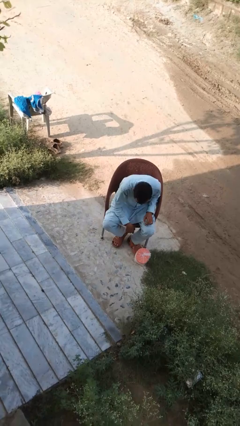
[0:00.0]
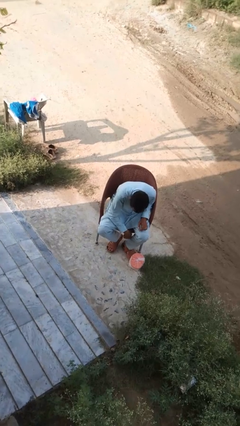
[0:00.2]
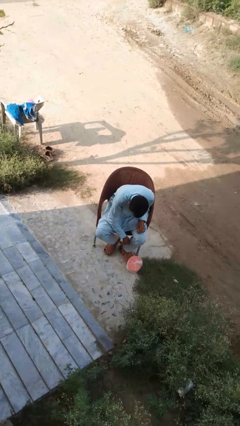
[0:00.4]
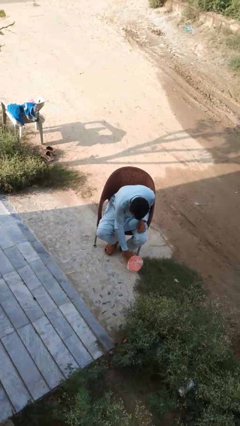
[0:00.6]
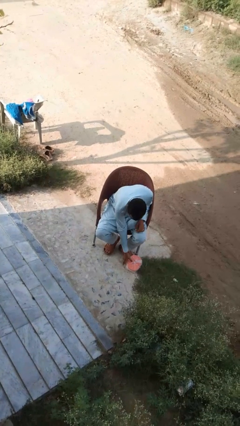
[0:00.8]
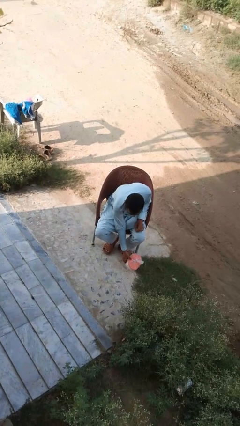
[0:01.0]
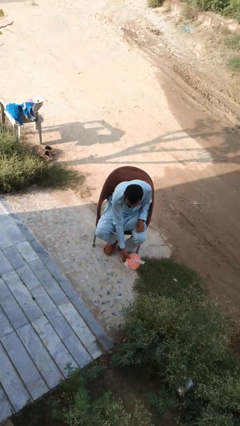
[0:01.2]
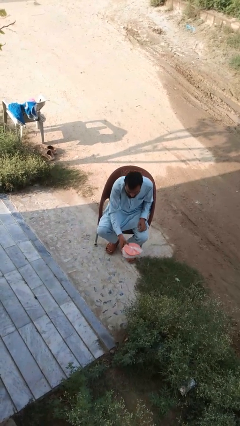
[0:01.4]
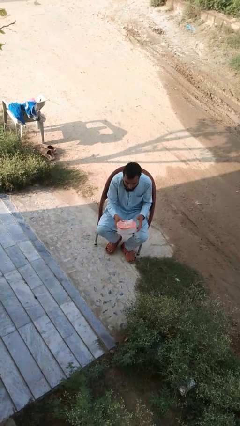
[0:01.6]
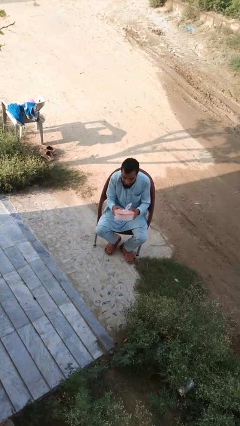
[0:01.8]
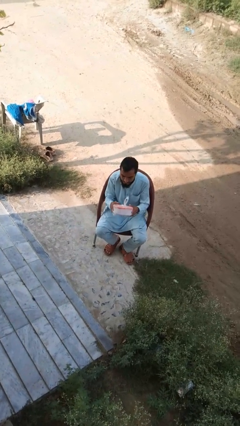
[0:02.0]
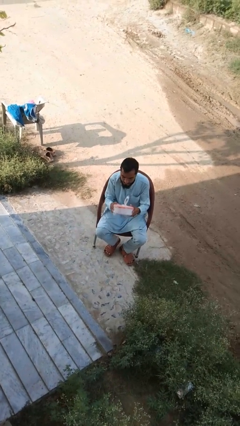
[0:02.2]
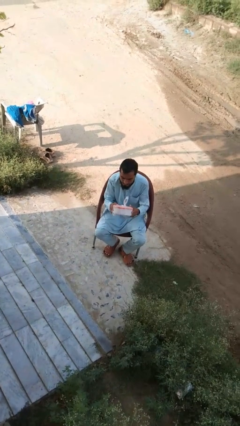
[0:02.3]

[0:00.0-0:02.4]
person picks up object from floor

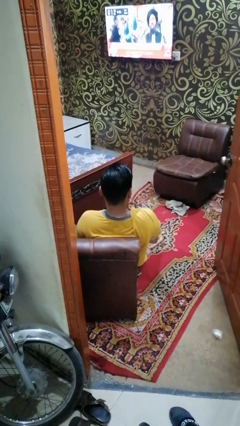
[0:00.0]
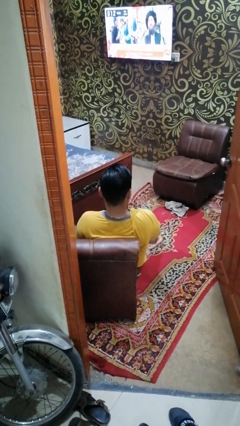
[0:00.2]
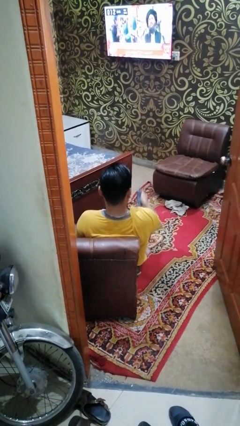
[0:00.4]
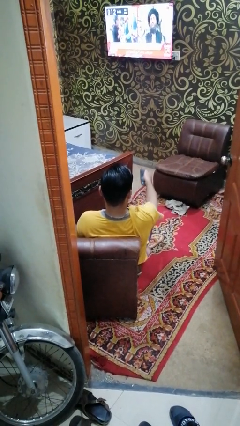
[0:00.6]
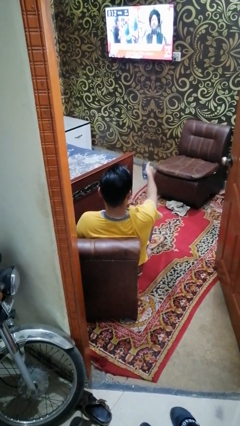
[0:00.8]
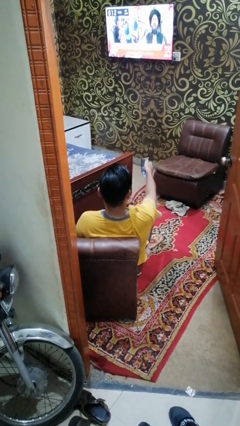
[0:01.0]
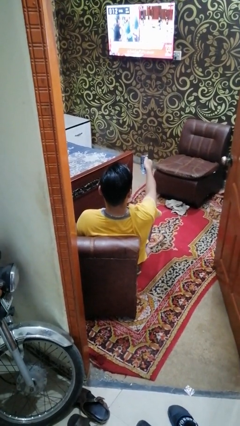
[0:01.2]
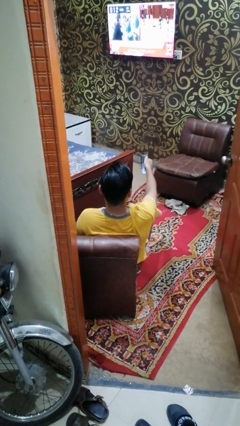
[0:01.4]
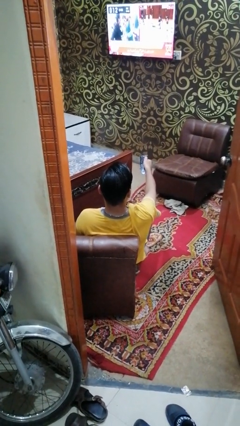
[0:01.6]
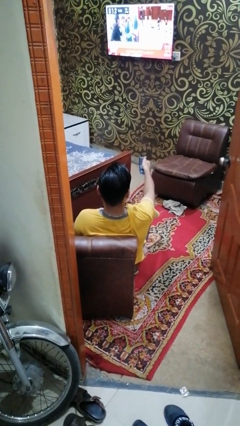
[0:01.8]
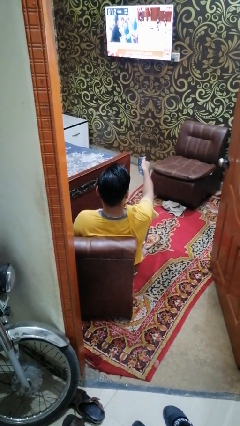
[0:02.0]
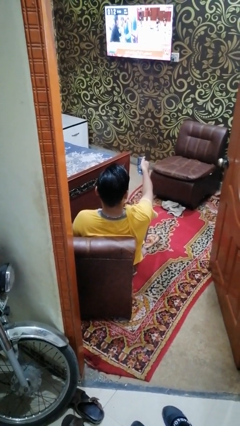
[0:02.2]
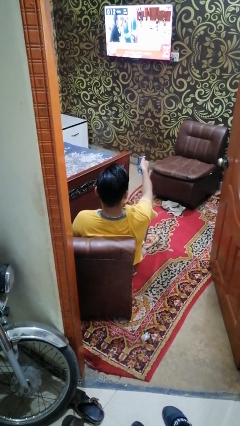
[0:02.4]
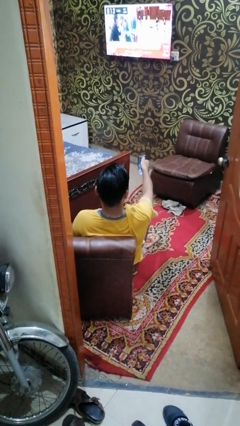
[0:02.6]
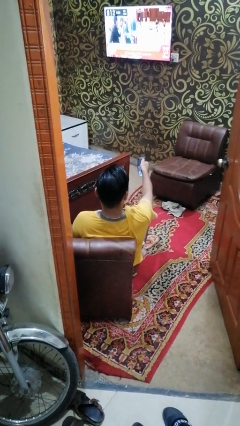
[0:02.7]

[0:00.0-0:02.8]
person uses television remote

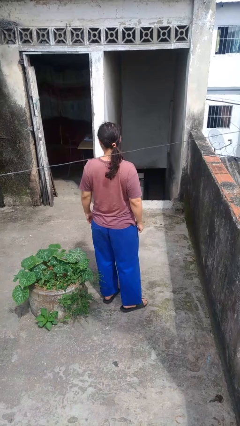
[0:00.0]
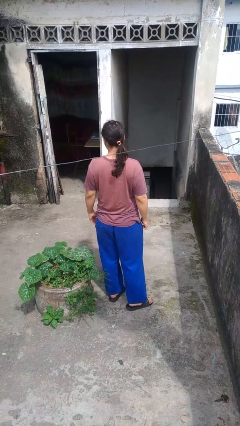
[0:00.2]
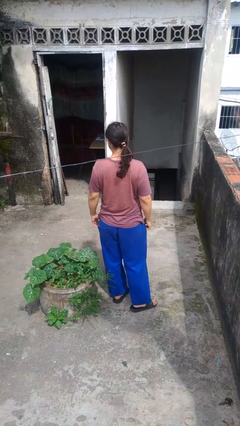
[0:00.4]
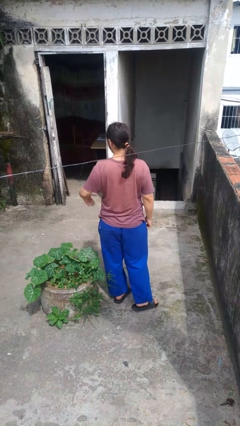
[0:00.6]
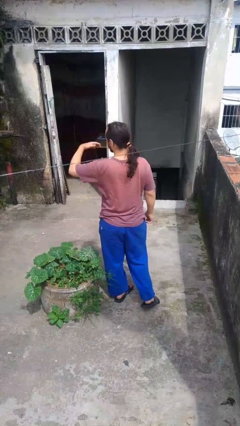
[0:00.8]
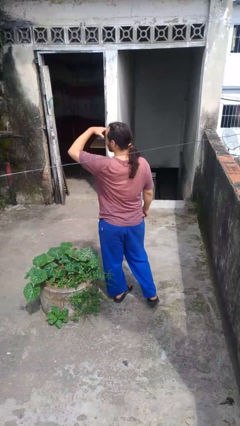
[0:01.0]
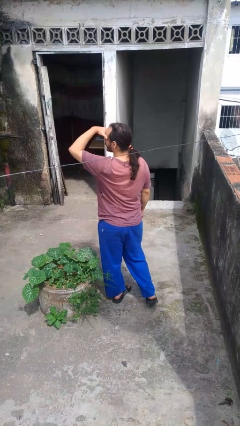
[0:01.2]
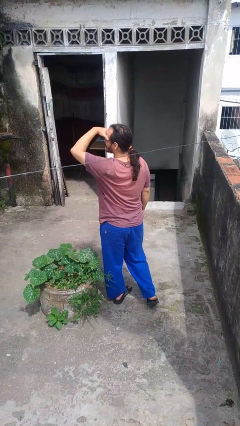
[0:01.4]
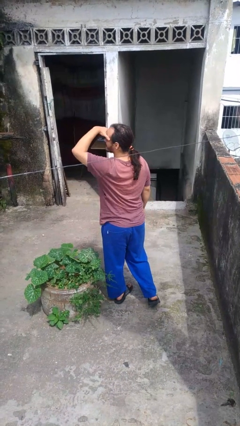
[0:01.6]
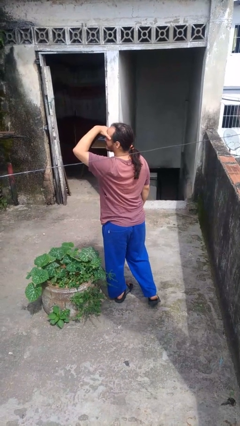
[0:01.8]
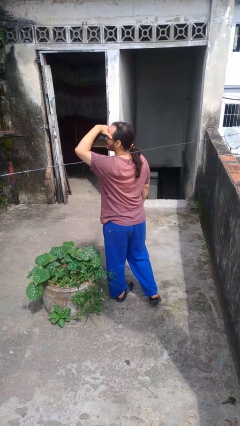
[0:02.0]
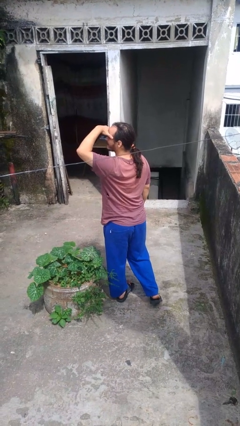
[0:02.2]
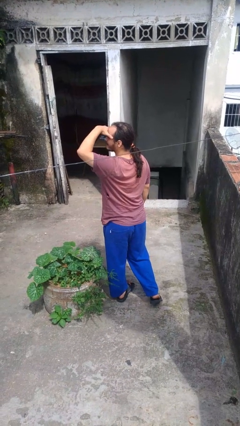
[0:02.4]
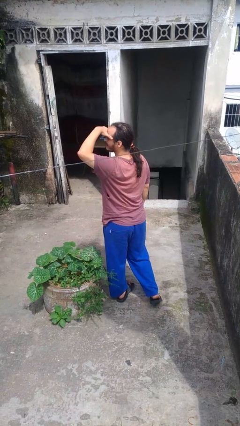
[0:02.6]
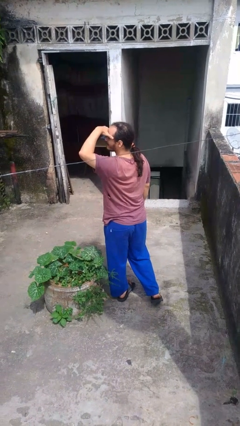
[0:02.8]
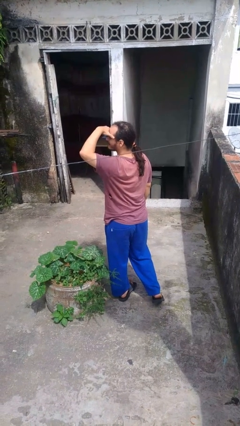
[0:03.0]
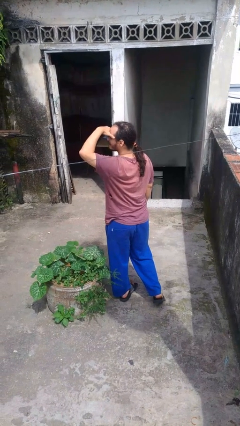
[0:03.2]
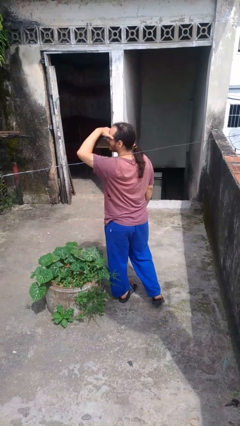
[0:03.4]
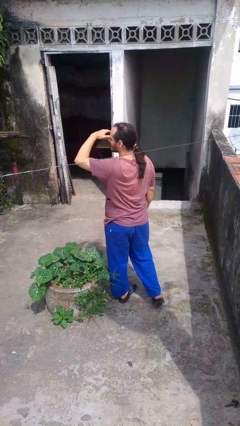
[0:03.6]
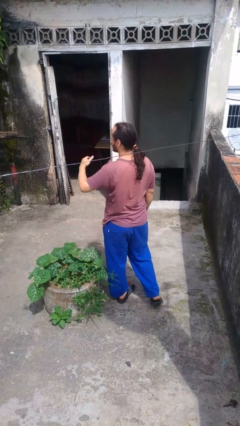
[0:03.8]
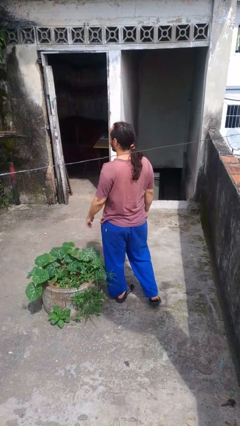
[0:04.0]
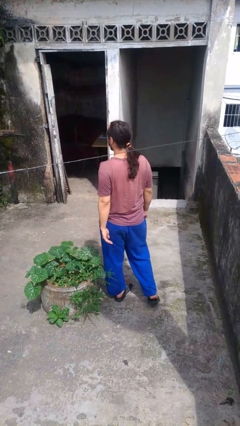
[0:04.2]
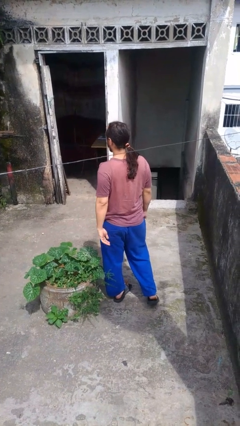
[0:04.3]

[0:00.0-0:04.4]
person shades eyes

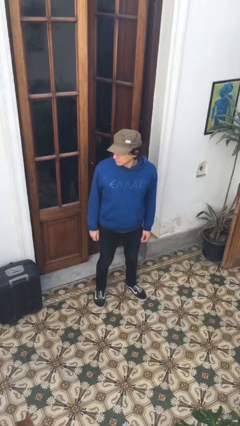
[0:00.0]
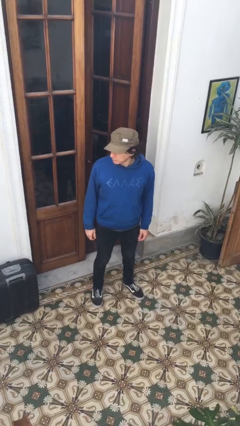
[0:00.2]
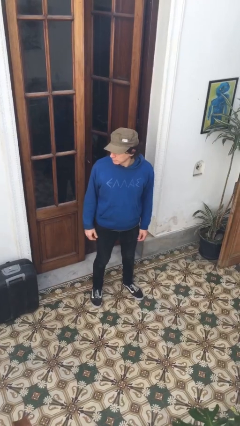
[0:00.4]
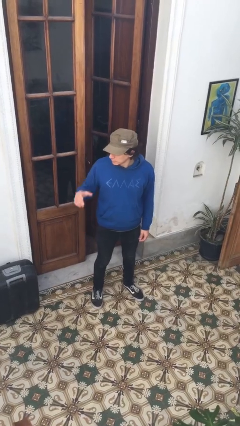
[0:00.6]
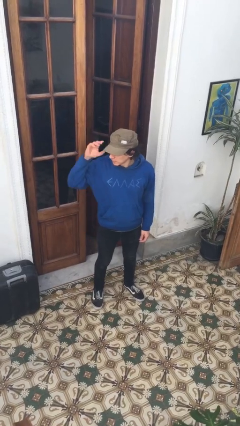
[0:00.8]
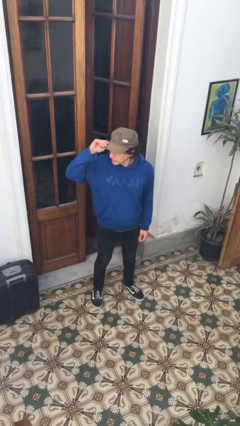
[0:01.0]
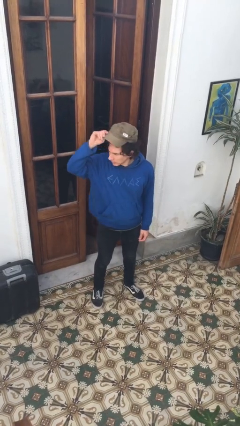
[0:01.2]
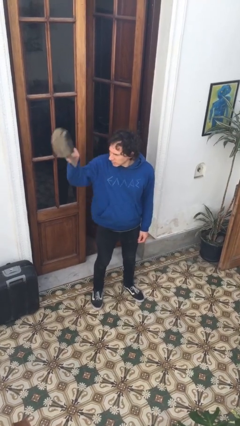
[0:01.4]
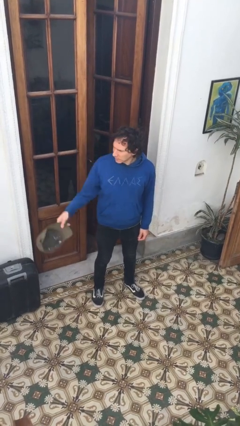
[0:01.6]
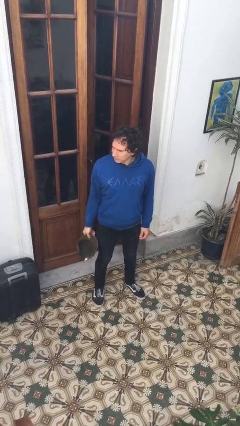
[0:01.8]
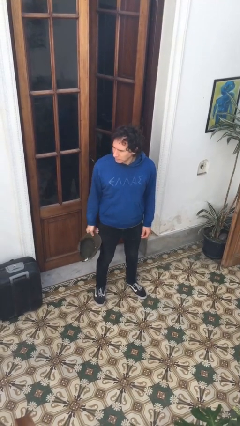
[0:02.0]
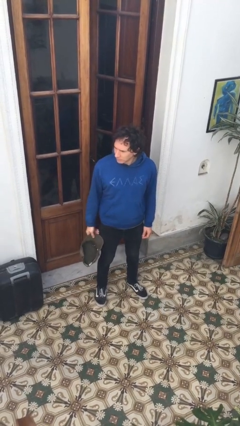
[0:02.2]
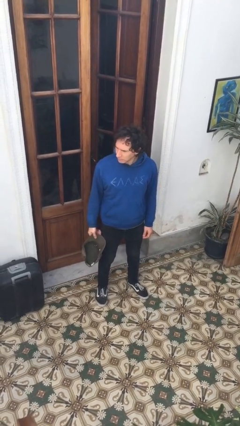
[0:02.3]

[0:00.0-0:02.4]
person takes off hat

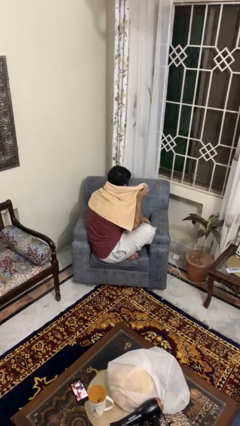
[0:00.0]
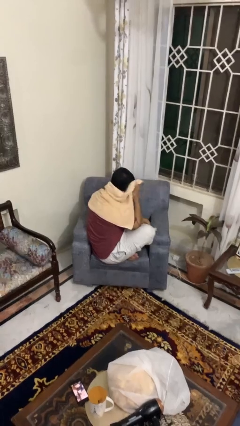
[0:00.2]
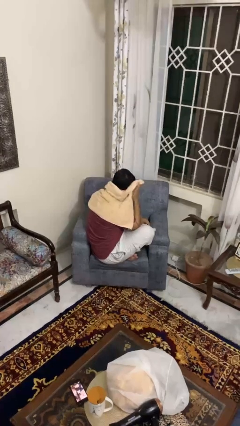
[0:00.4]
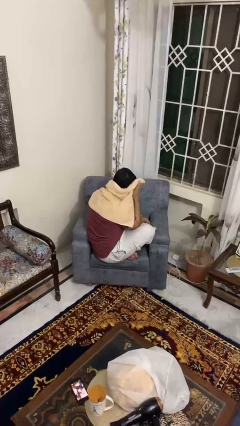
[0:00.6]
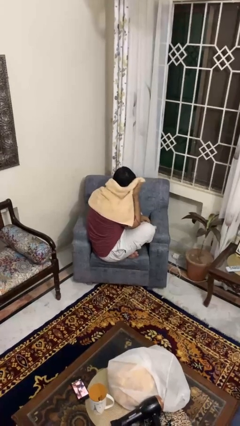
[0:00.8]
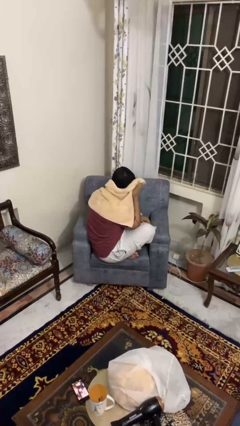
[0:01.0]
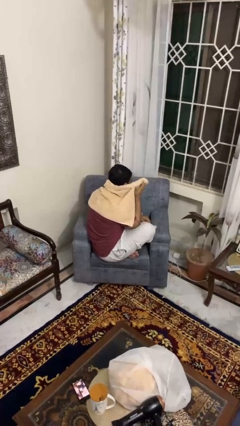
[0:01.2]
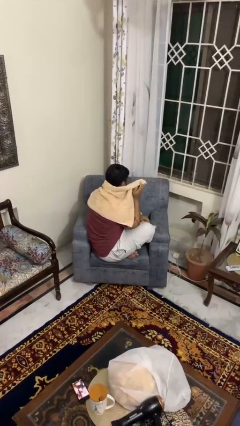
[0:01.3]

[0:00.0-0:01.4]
person dries hair with towel

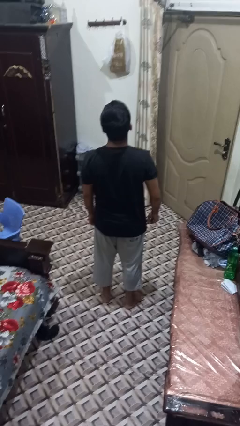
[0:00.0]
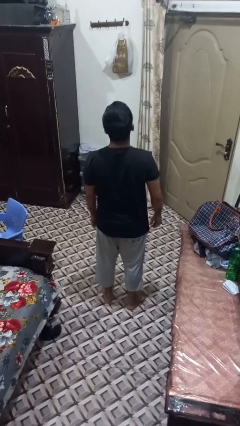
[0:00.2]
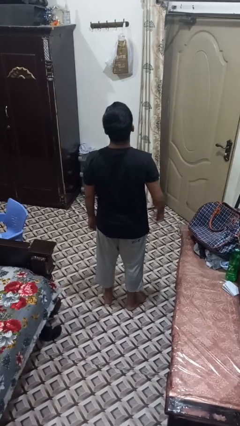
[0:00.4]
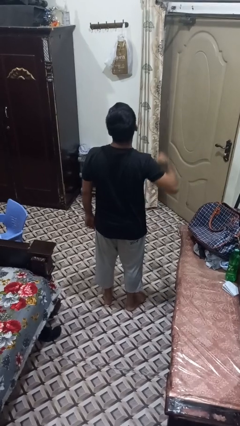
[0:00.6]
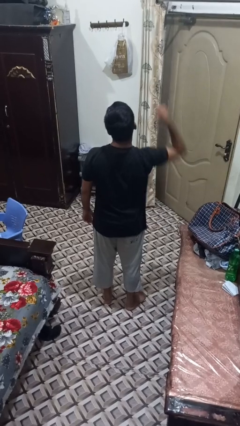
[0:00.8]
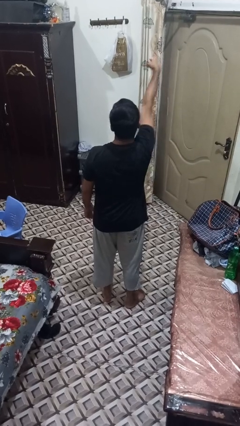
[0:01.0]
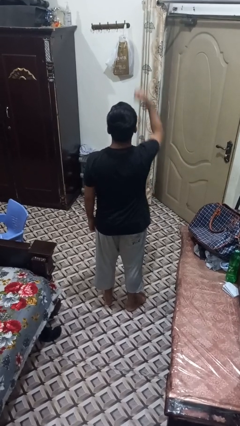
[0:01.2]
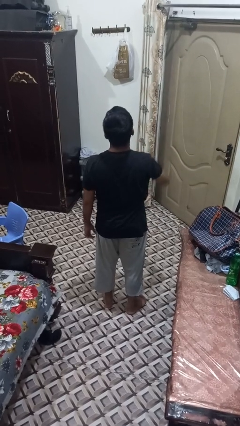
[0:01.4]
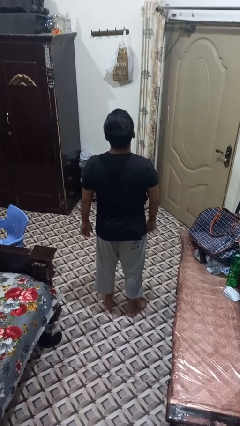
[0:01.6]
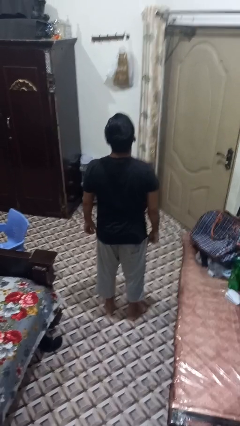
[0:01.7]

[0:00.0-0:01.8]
person punches

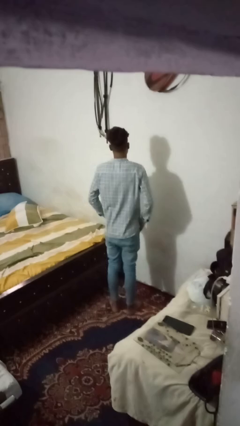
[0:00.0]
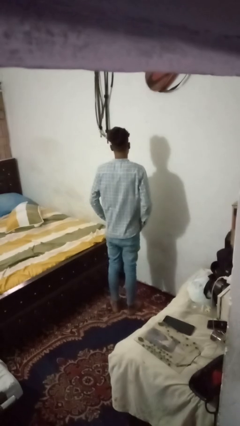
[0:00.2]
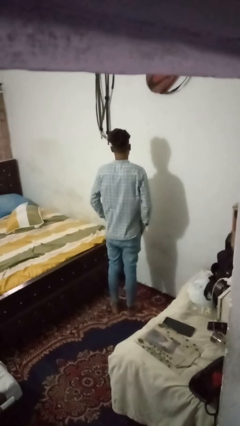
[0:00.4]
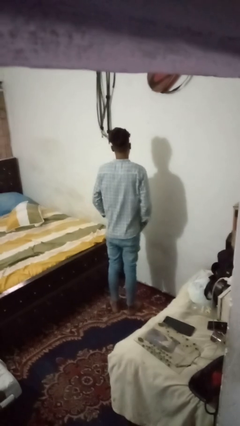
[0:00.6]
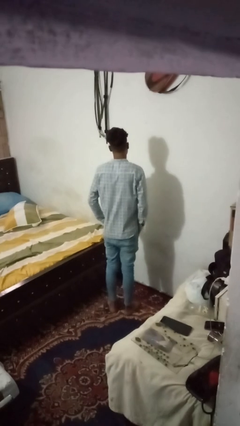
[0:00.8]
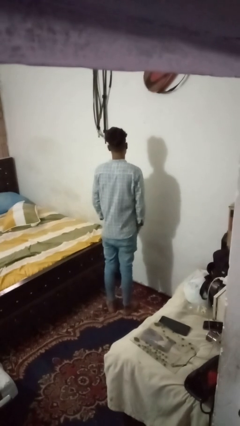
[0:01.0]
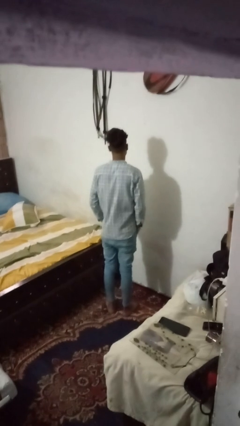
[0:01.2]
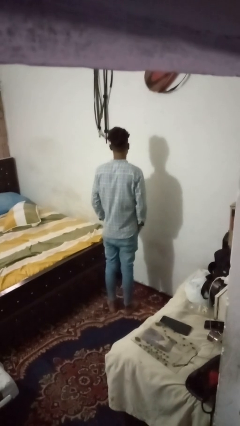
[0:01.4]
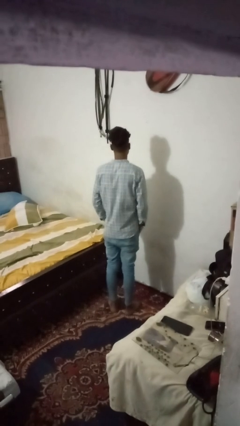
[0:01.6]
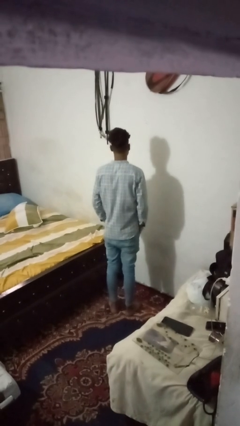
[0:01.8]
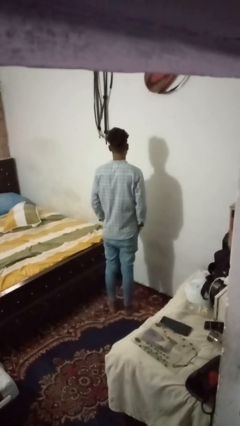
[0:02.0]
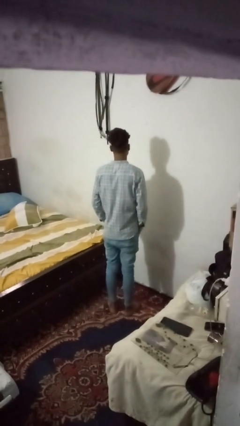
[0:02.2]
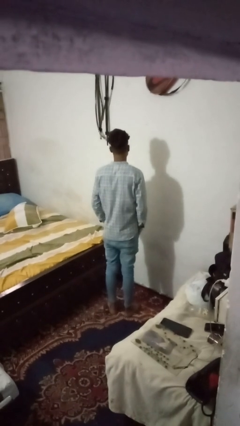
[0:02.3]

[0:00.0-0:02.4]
person puts hands in back pockets
